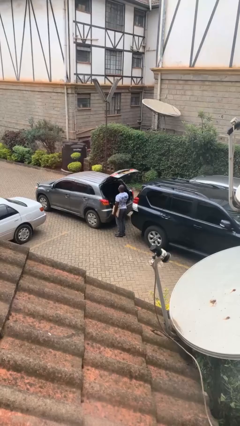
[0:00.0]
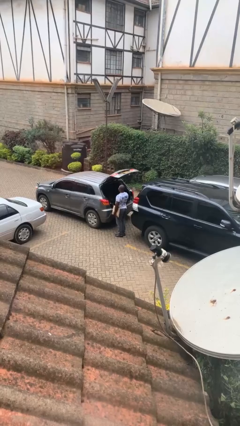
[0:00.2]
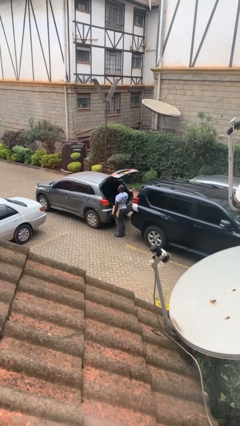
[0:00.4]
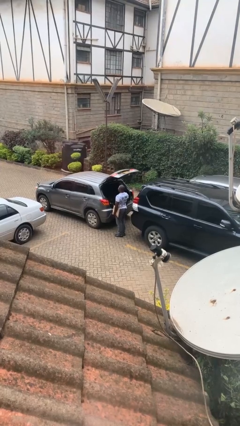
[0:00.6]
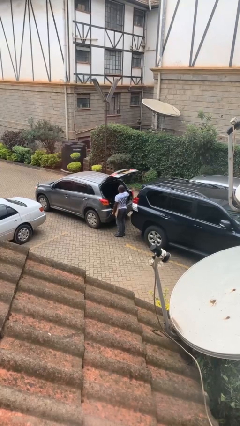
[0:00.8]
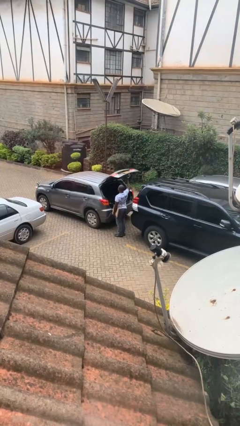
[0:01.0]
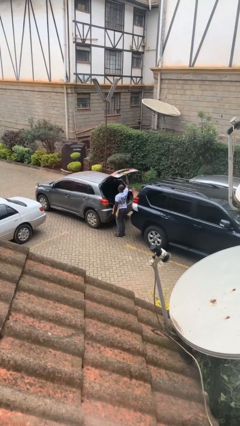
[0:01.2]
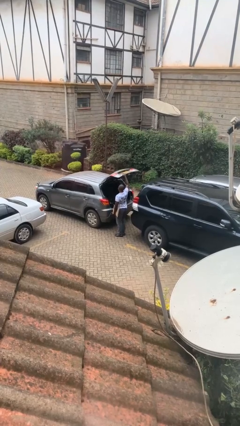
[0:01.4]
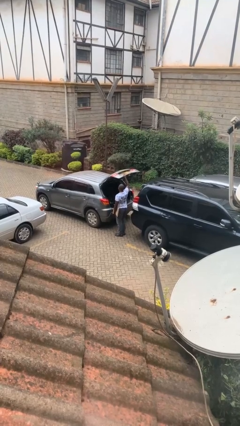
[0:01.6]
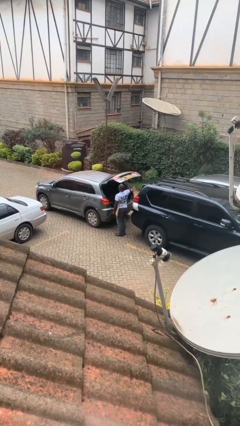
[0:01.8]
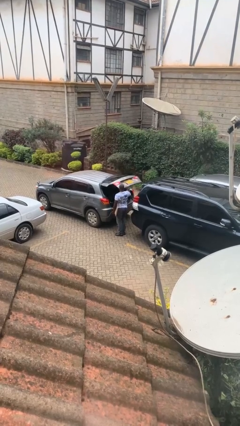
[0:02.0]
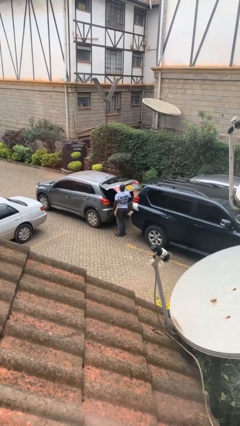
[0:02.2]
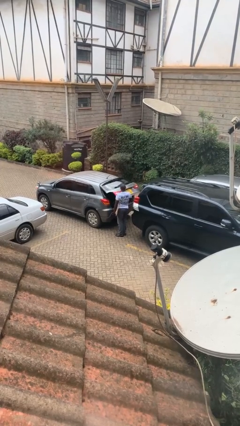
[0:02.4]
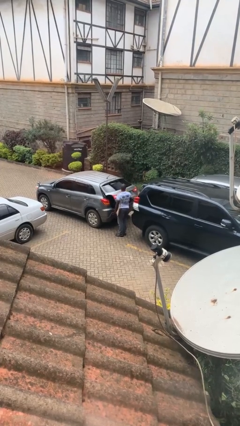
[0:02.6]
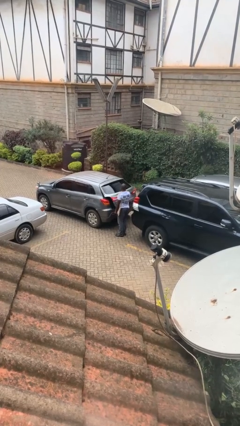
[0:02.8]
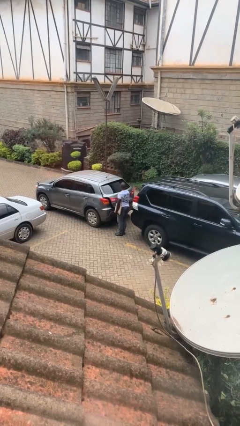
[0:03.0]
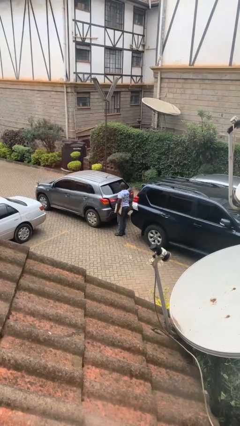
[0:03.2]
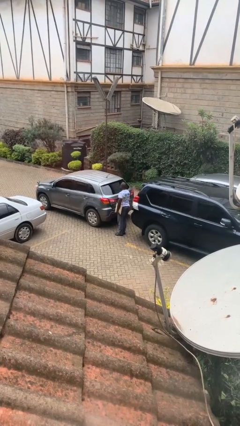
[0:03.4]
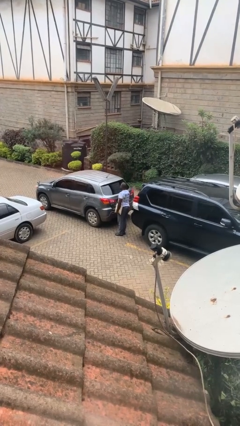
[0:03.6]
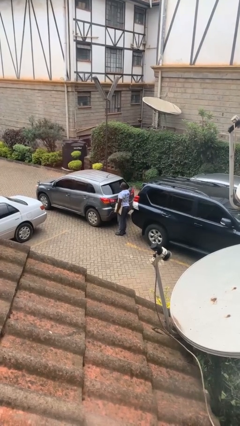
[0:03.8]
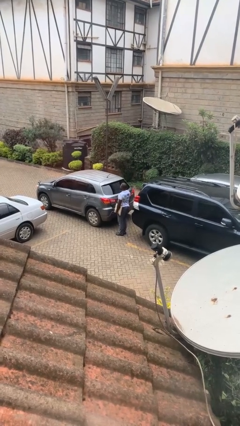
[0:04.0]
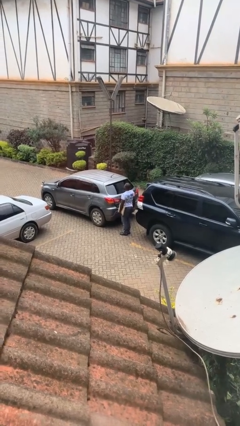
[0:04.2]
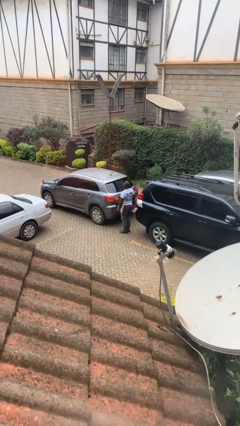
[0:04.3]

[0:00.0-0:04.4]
person closes car trunk

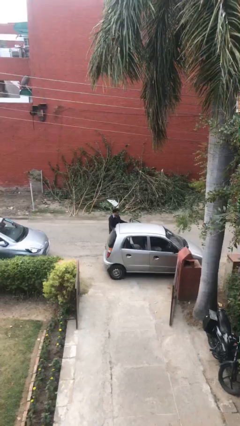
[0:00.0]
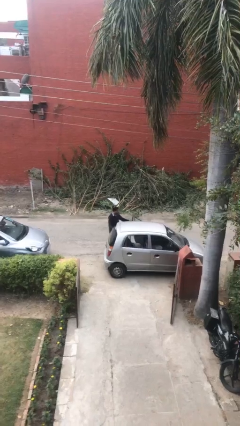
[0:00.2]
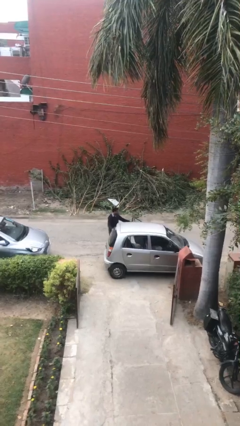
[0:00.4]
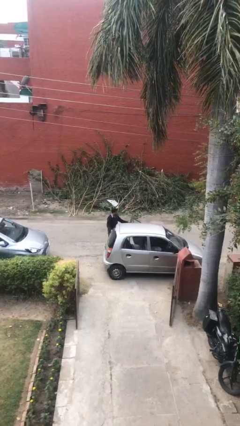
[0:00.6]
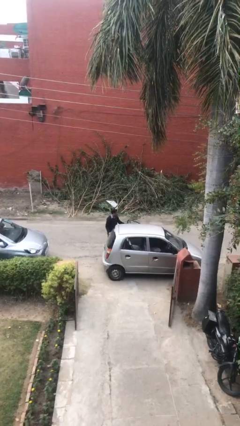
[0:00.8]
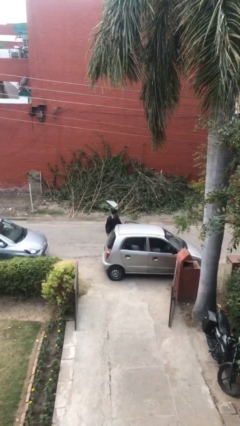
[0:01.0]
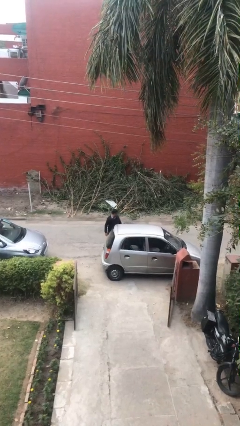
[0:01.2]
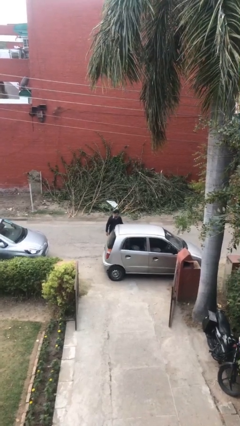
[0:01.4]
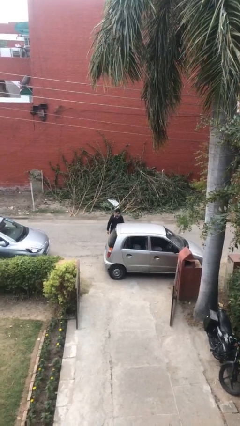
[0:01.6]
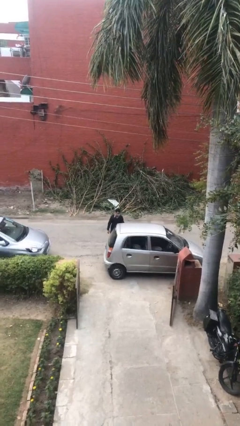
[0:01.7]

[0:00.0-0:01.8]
person closes car door

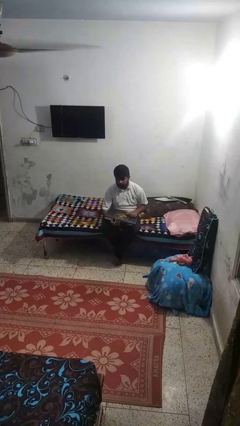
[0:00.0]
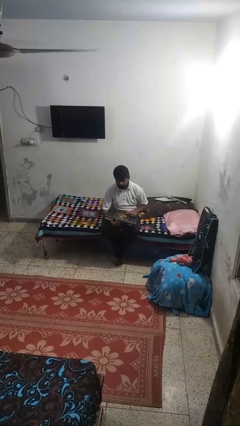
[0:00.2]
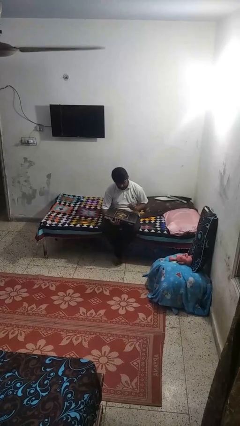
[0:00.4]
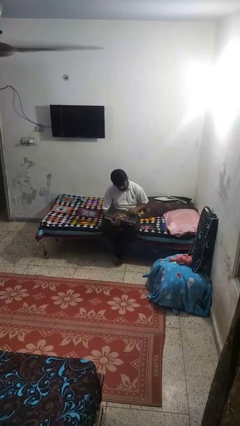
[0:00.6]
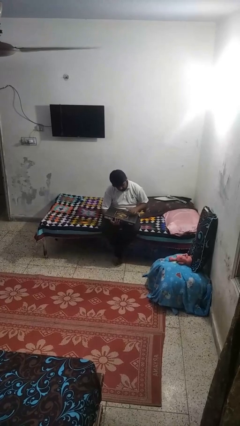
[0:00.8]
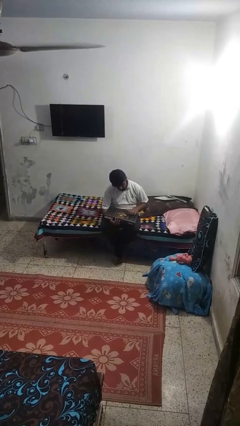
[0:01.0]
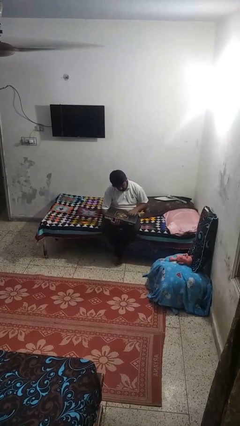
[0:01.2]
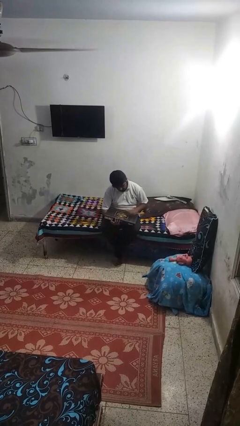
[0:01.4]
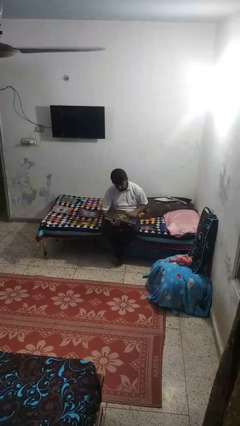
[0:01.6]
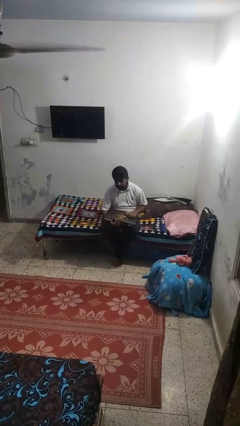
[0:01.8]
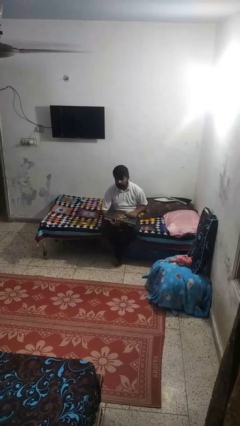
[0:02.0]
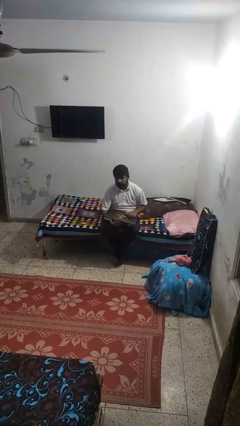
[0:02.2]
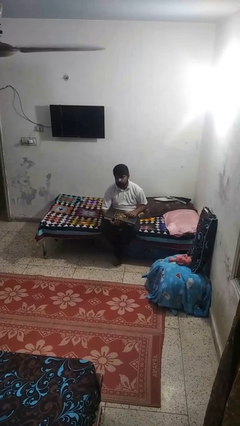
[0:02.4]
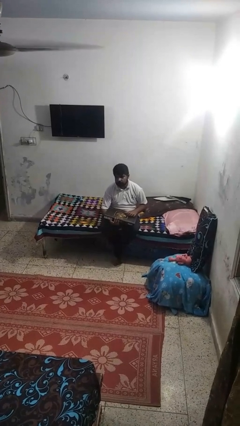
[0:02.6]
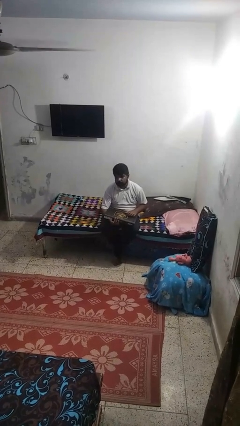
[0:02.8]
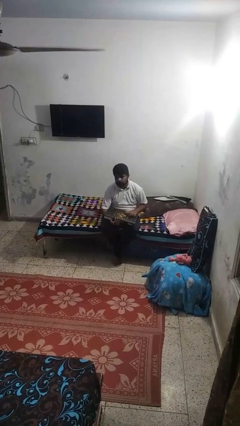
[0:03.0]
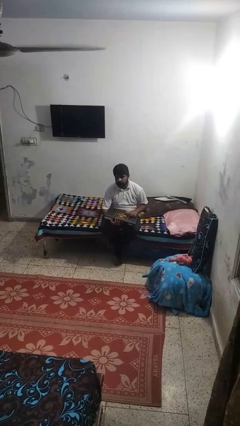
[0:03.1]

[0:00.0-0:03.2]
person taps object with finger

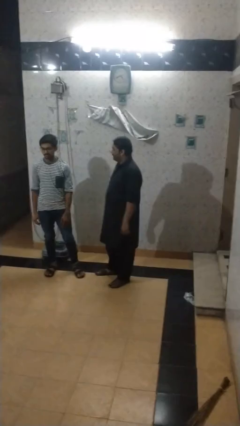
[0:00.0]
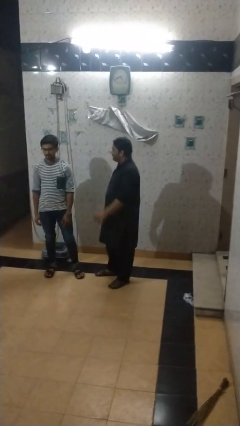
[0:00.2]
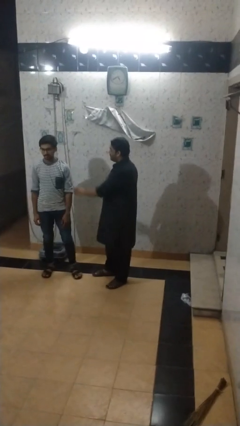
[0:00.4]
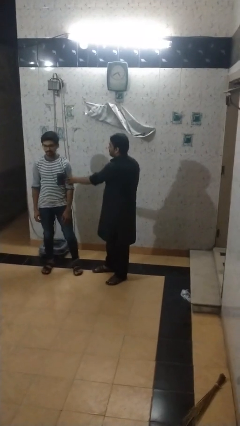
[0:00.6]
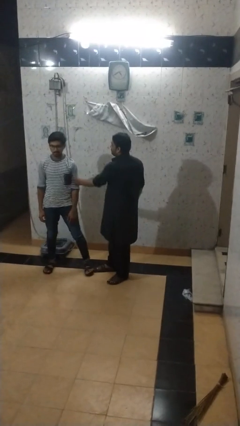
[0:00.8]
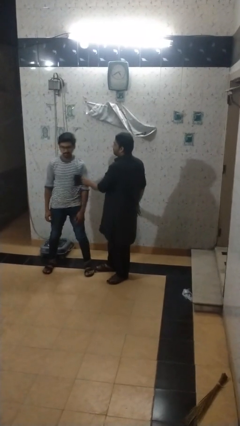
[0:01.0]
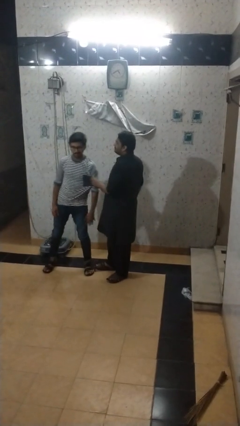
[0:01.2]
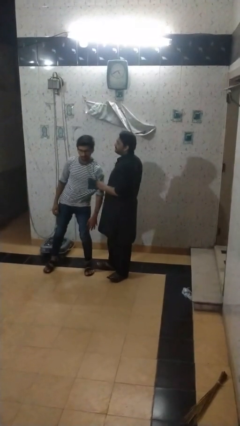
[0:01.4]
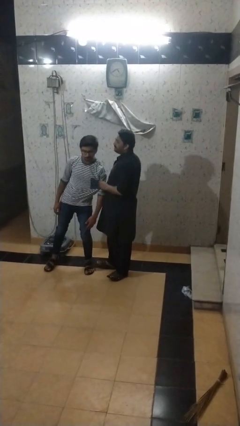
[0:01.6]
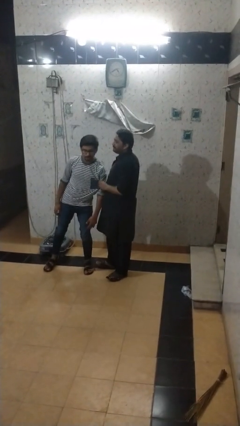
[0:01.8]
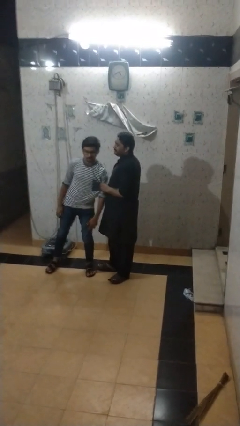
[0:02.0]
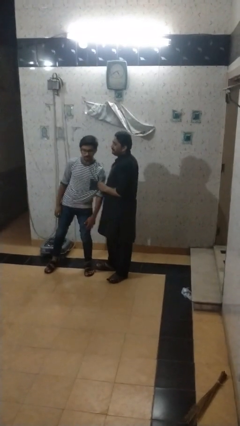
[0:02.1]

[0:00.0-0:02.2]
person grabs person by bicep

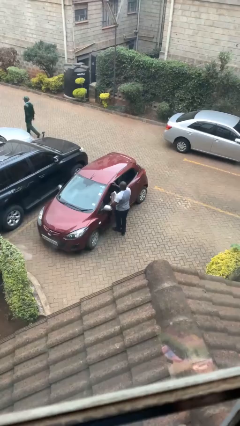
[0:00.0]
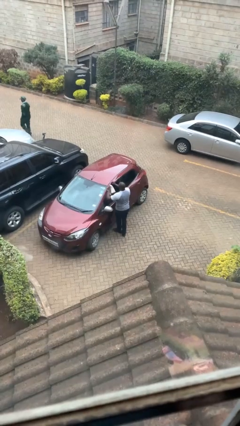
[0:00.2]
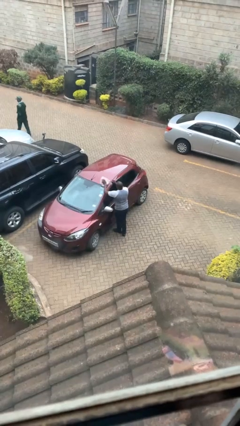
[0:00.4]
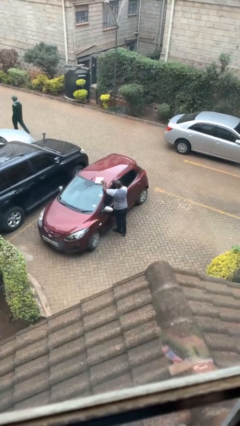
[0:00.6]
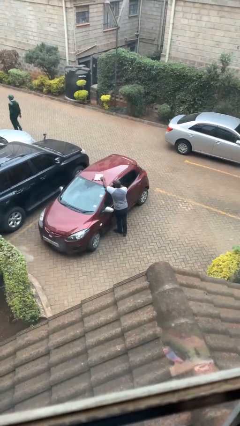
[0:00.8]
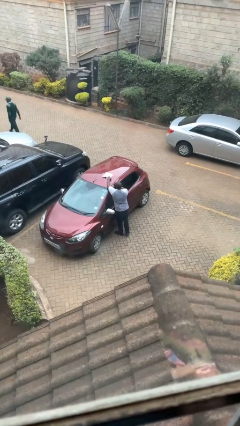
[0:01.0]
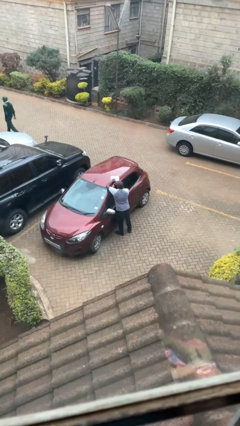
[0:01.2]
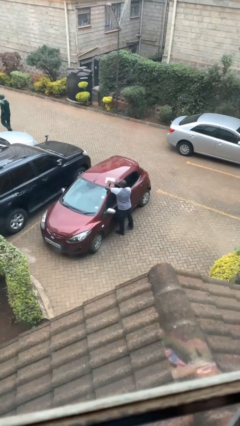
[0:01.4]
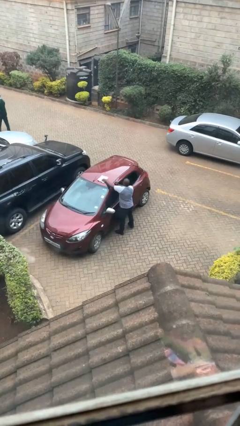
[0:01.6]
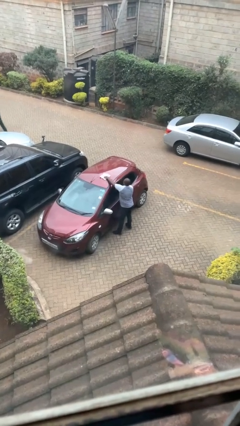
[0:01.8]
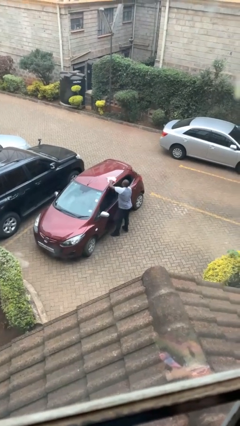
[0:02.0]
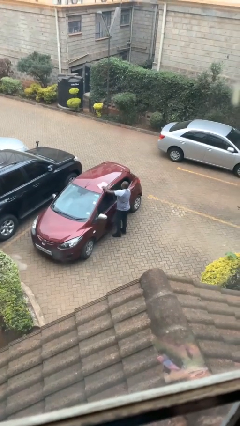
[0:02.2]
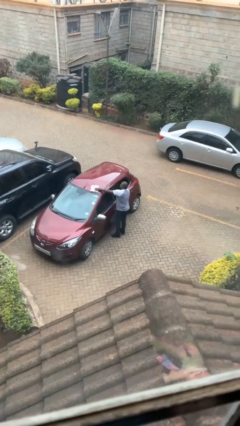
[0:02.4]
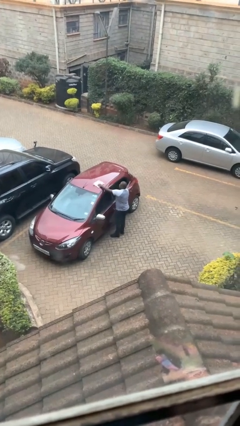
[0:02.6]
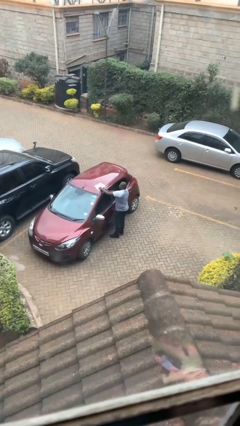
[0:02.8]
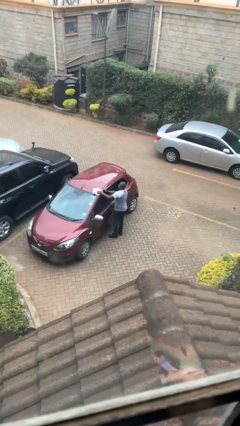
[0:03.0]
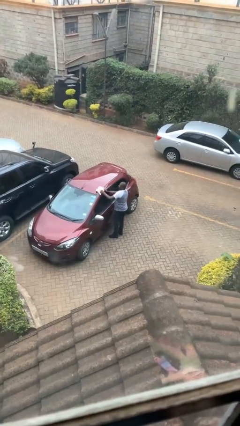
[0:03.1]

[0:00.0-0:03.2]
person polishes car with rag

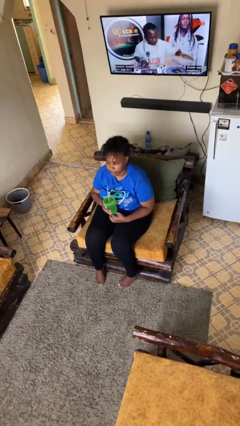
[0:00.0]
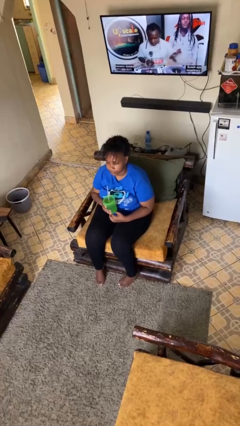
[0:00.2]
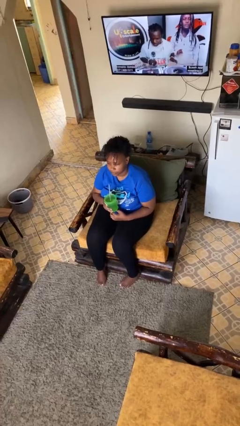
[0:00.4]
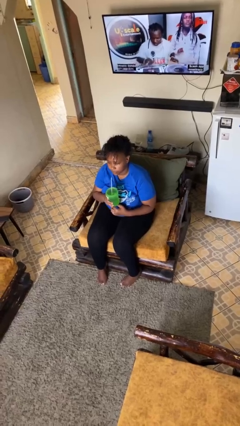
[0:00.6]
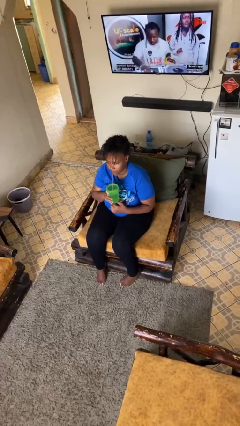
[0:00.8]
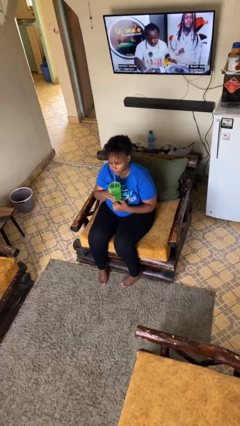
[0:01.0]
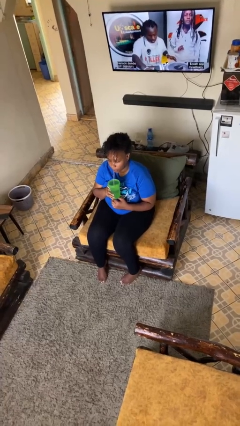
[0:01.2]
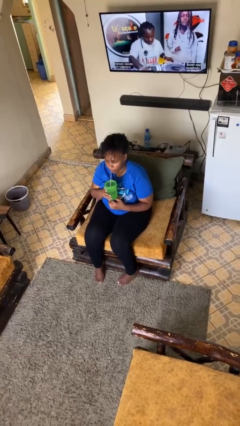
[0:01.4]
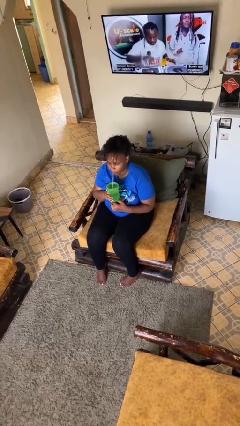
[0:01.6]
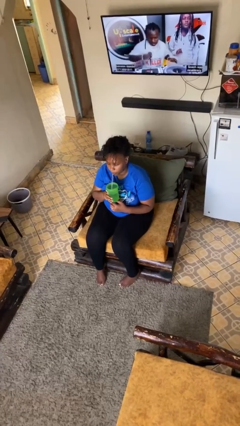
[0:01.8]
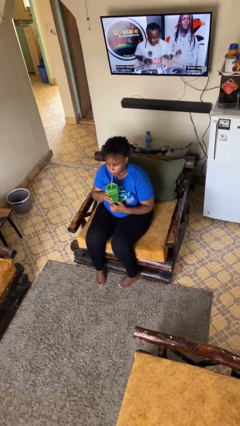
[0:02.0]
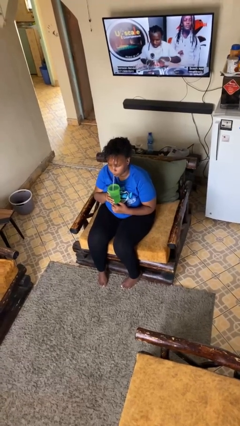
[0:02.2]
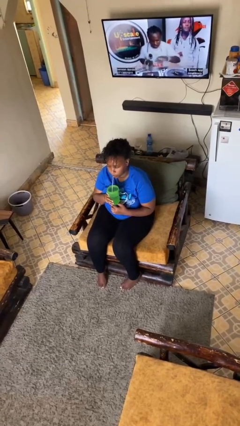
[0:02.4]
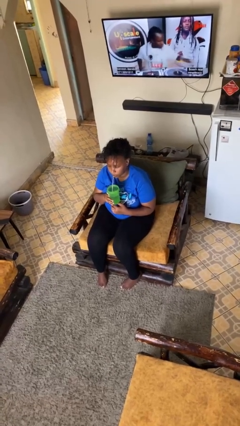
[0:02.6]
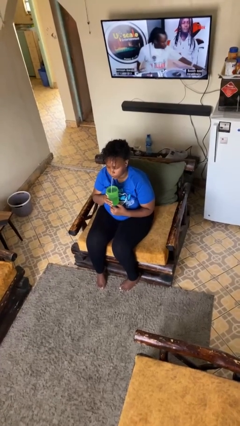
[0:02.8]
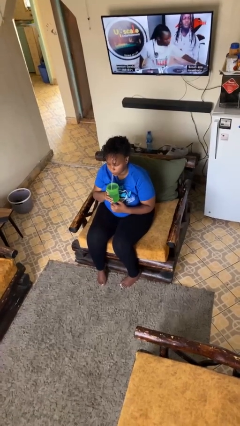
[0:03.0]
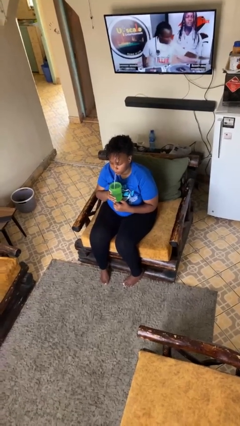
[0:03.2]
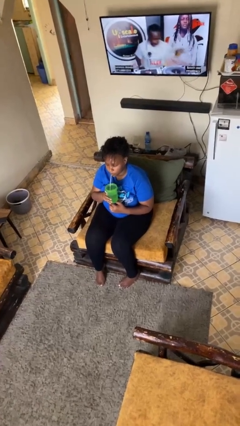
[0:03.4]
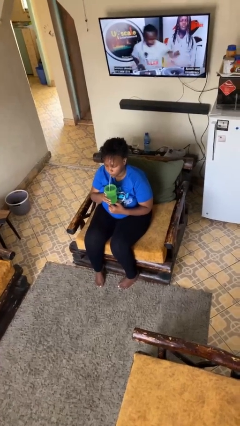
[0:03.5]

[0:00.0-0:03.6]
person drinks from straw
